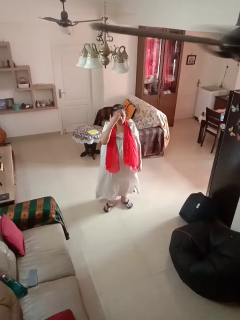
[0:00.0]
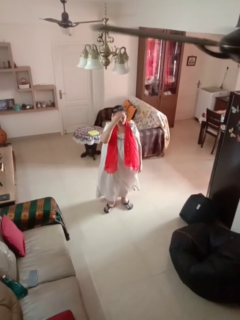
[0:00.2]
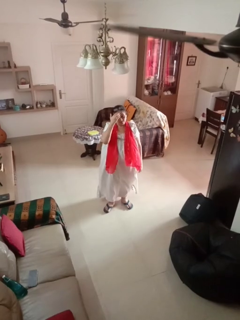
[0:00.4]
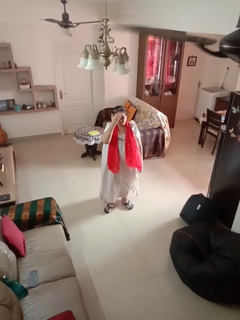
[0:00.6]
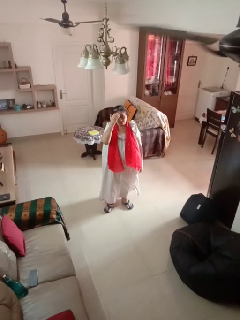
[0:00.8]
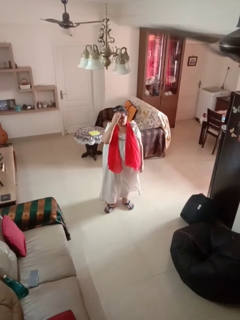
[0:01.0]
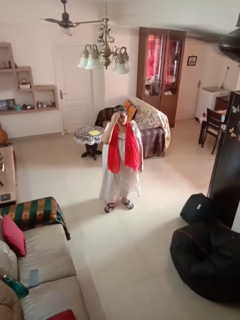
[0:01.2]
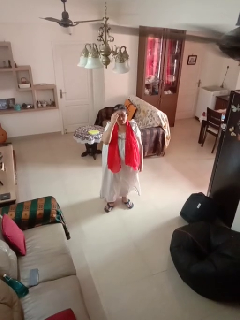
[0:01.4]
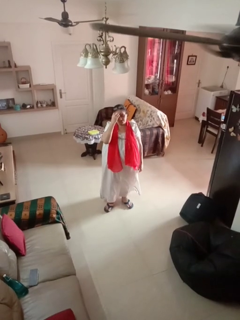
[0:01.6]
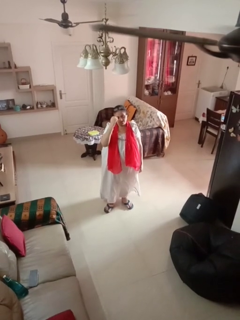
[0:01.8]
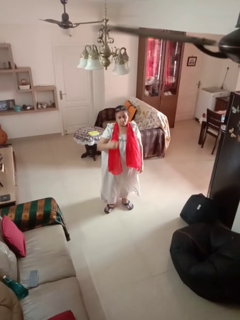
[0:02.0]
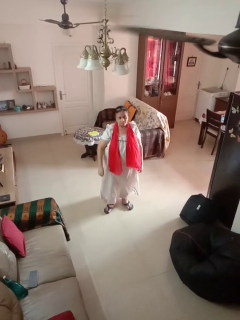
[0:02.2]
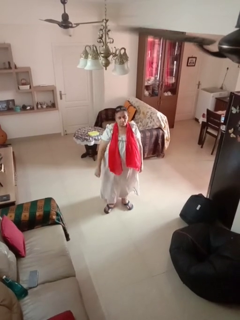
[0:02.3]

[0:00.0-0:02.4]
person scratches face

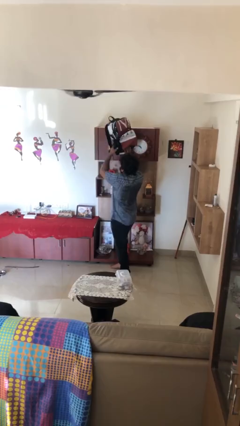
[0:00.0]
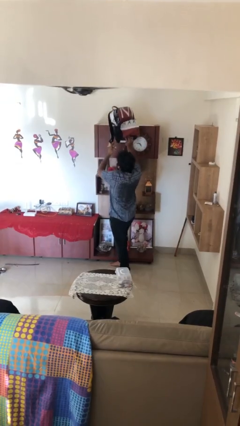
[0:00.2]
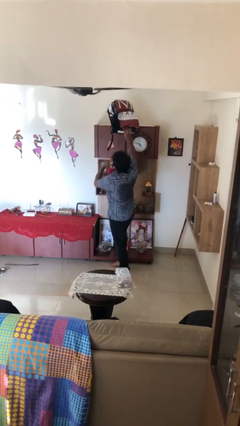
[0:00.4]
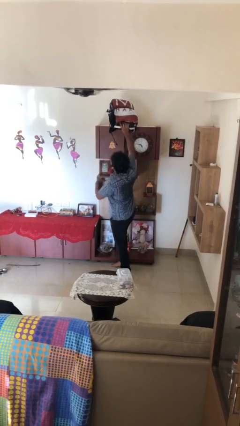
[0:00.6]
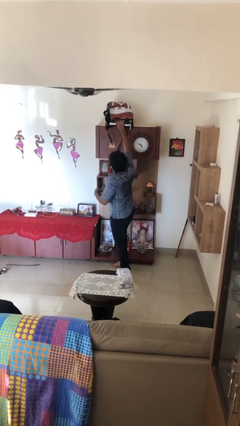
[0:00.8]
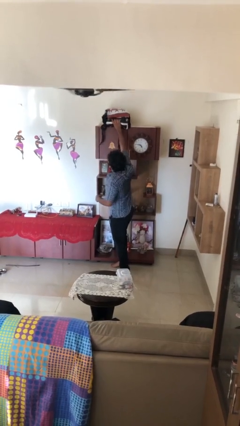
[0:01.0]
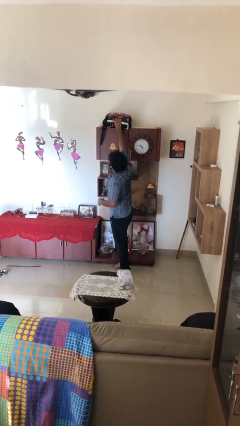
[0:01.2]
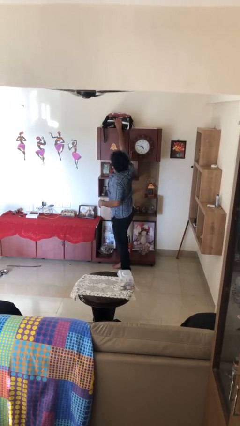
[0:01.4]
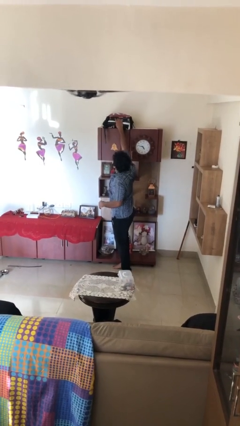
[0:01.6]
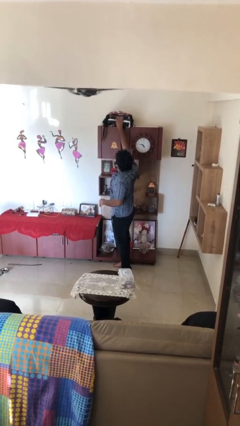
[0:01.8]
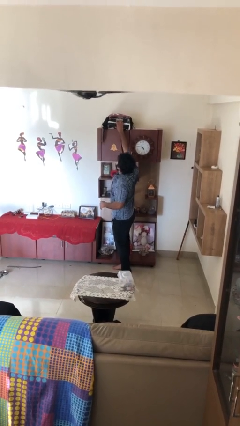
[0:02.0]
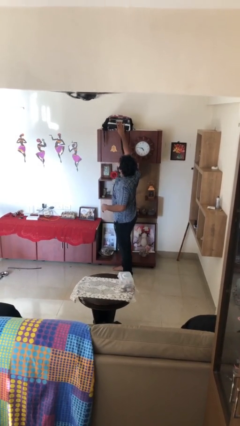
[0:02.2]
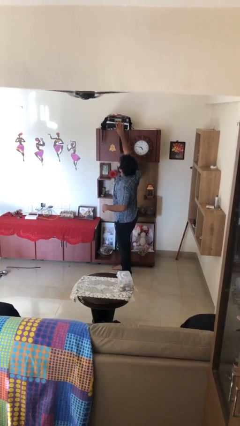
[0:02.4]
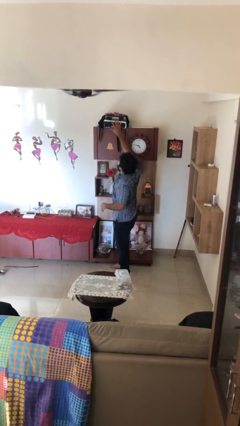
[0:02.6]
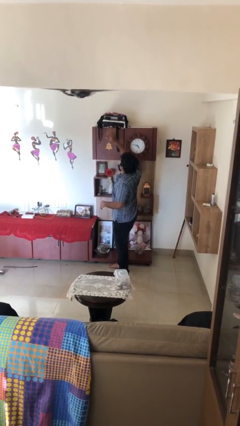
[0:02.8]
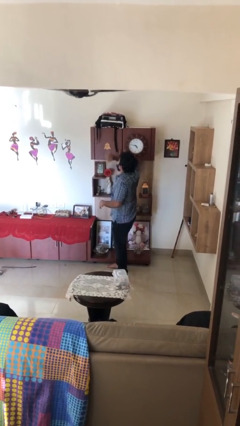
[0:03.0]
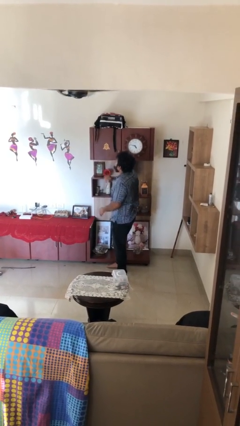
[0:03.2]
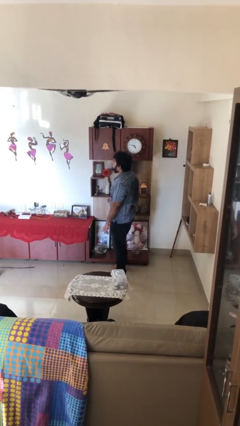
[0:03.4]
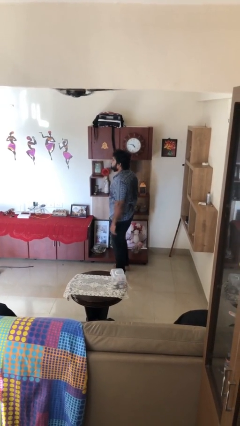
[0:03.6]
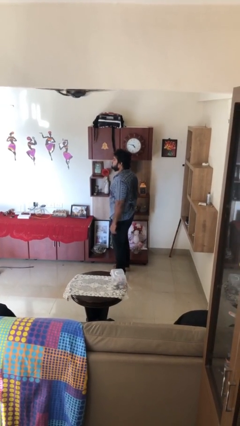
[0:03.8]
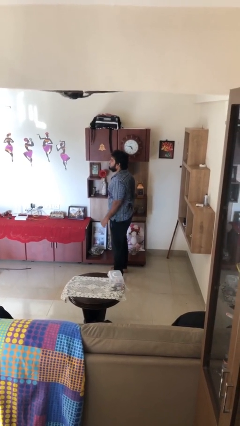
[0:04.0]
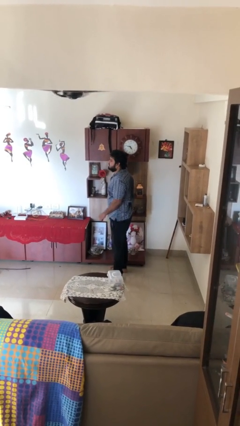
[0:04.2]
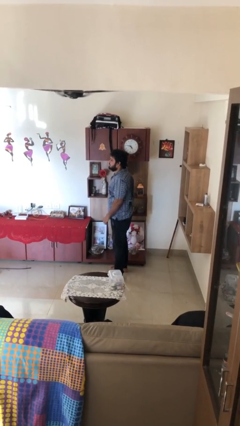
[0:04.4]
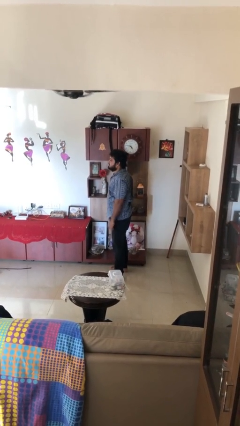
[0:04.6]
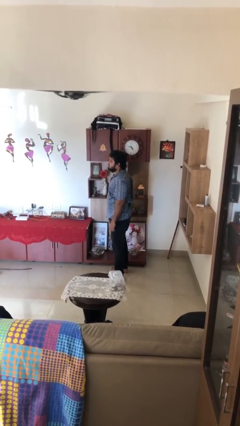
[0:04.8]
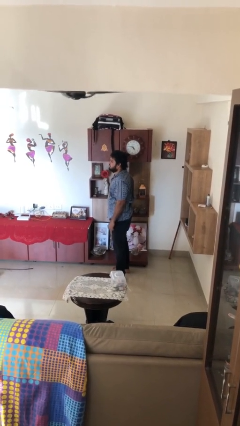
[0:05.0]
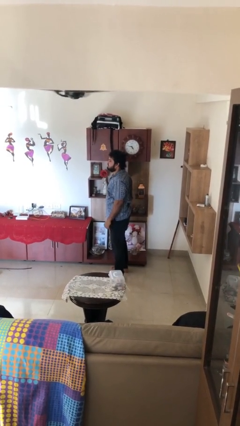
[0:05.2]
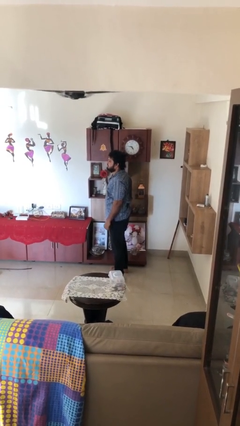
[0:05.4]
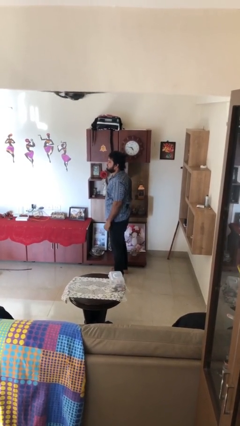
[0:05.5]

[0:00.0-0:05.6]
person puts down object on shelf

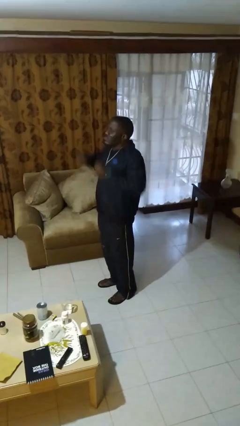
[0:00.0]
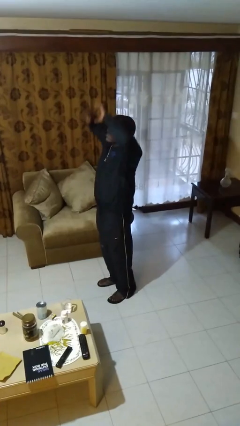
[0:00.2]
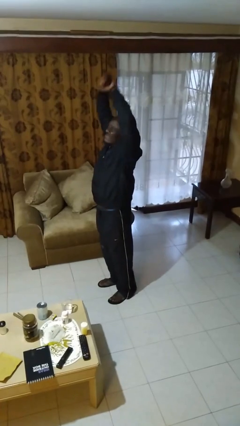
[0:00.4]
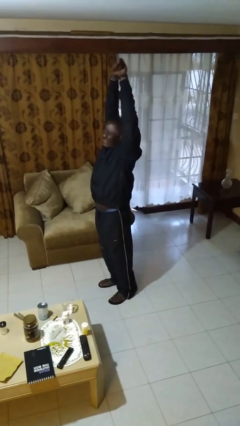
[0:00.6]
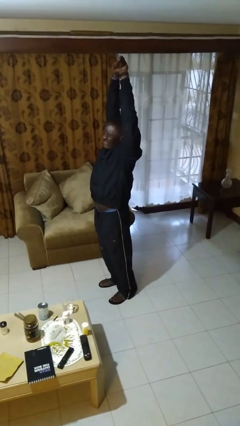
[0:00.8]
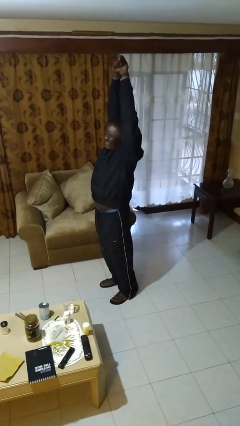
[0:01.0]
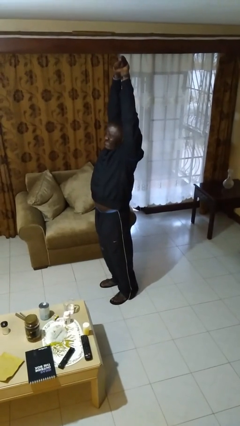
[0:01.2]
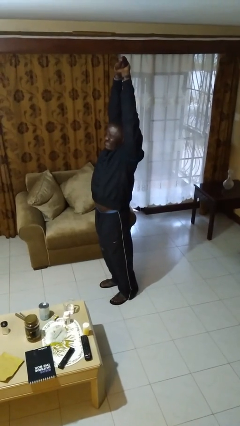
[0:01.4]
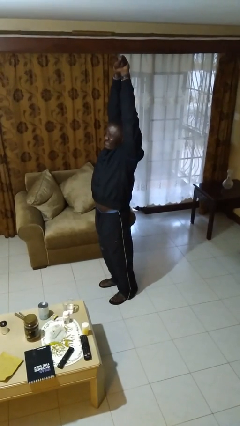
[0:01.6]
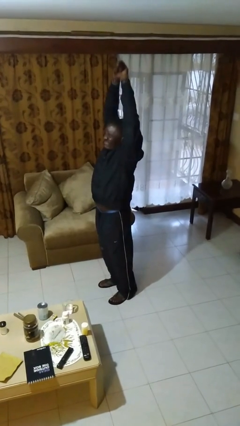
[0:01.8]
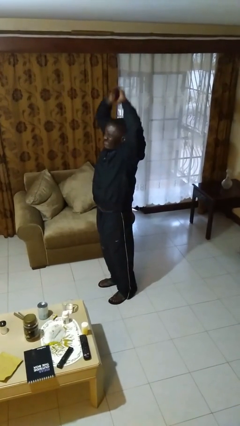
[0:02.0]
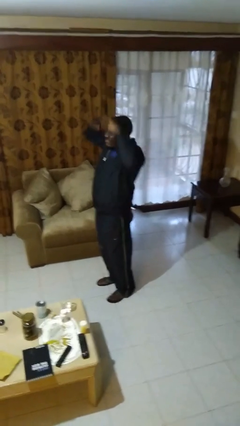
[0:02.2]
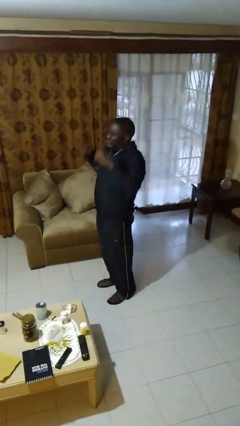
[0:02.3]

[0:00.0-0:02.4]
person stretches arms over head

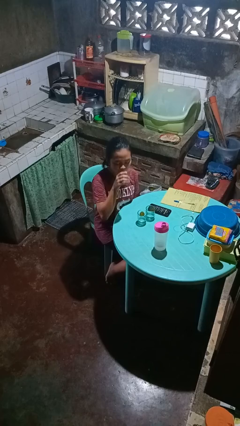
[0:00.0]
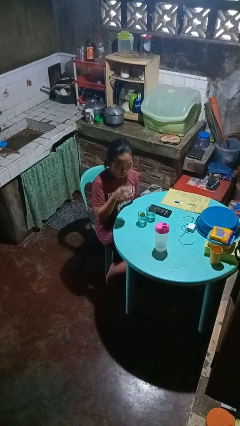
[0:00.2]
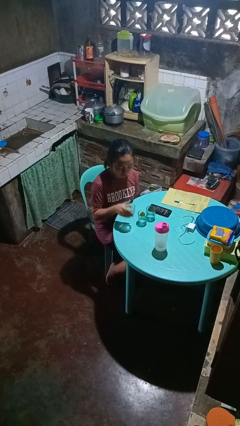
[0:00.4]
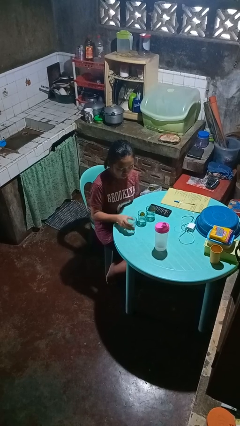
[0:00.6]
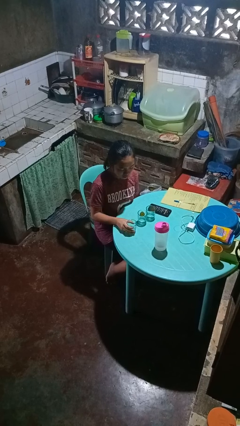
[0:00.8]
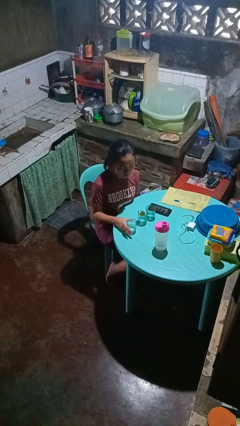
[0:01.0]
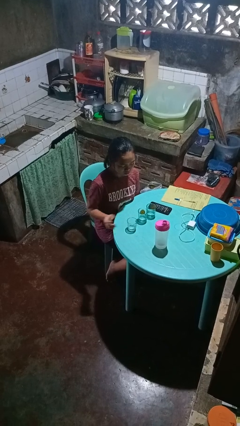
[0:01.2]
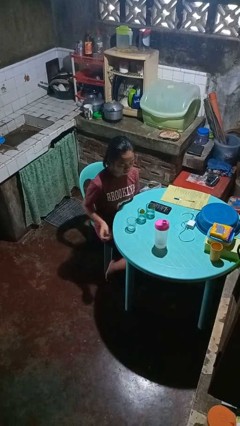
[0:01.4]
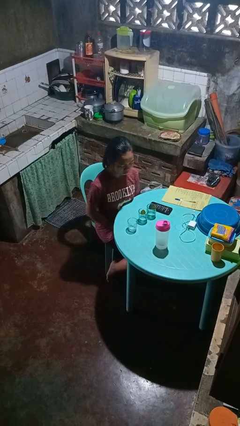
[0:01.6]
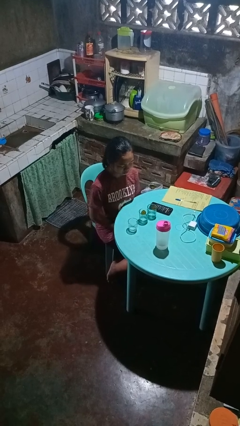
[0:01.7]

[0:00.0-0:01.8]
person puts down object on table

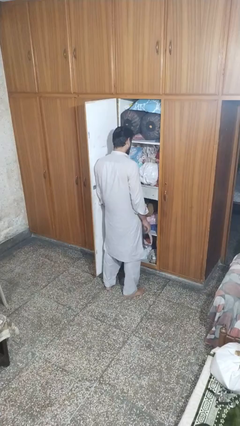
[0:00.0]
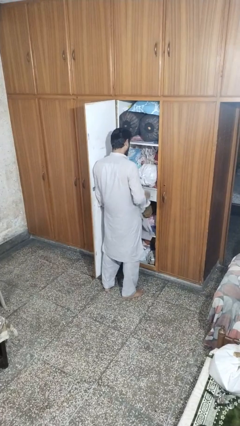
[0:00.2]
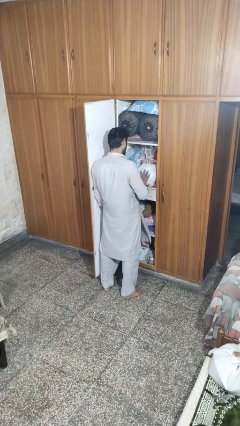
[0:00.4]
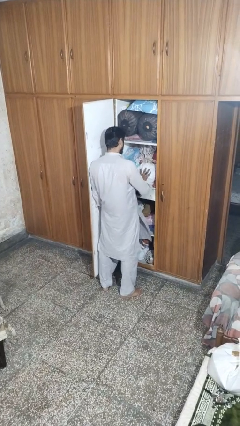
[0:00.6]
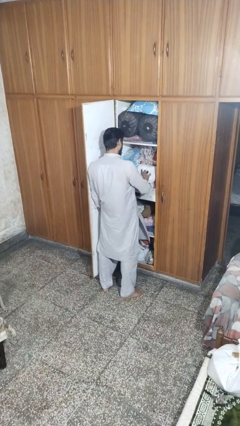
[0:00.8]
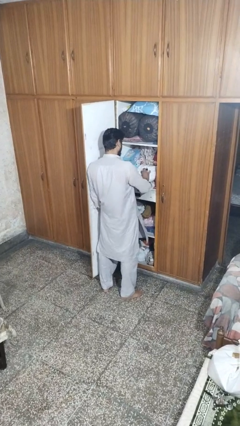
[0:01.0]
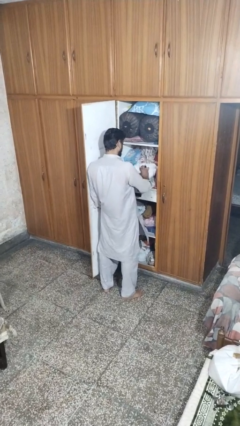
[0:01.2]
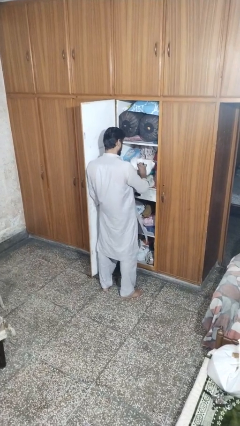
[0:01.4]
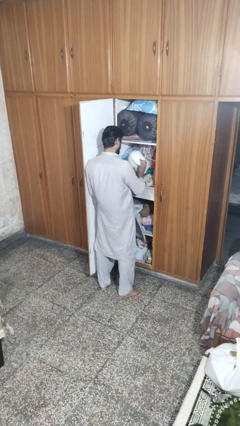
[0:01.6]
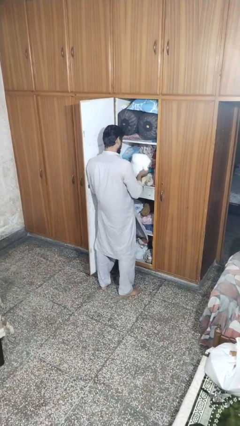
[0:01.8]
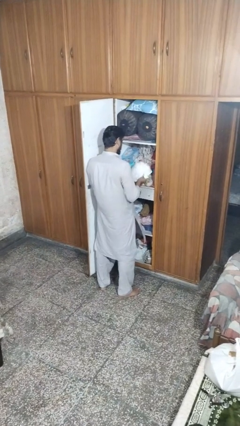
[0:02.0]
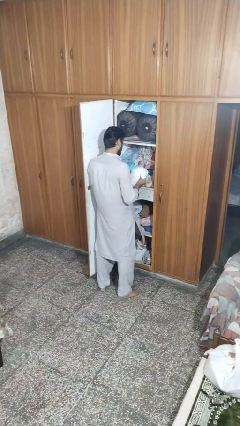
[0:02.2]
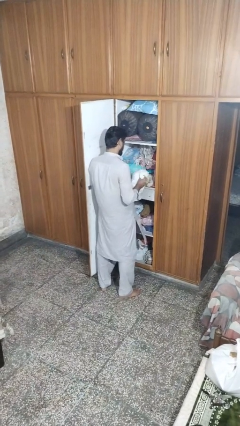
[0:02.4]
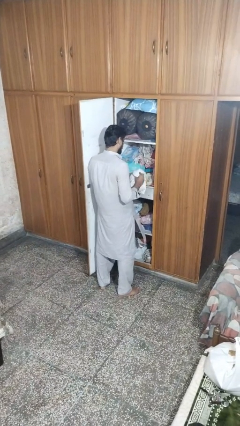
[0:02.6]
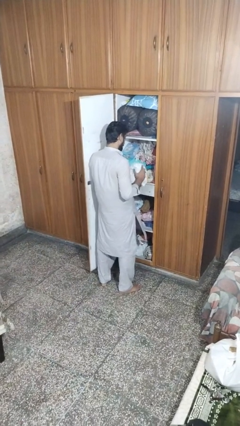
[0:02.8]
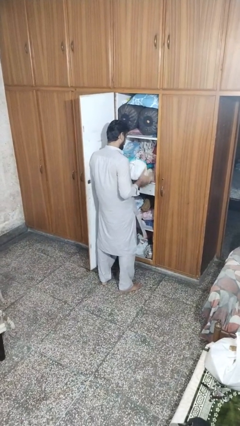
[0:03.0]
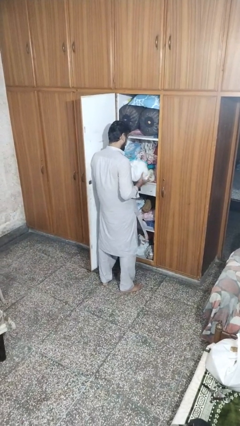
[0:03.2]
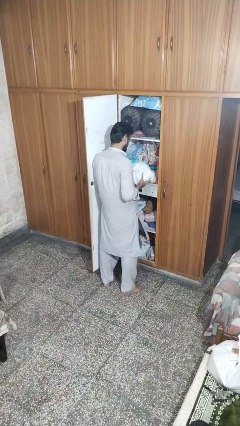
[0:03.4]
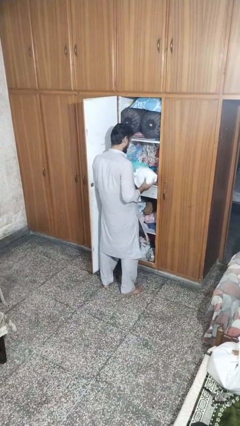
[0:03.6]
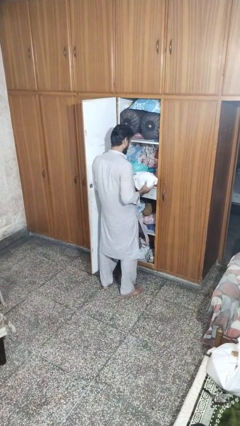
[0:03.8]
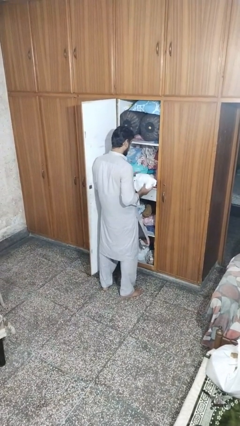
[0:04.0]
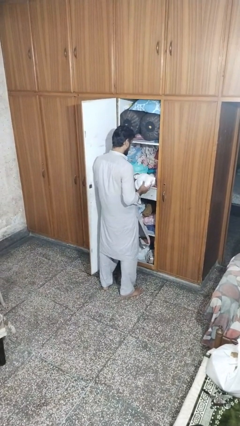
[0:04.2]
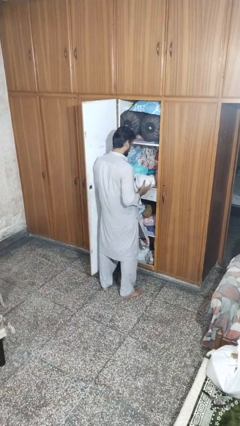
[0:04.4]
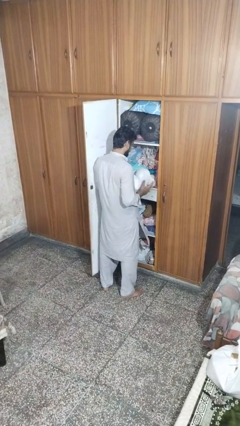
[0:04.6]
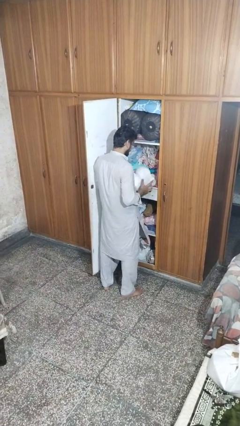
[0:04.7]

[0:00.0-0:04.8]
person picks up object from cabinet

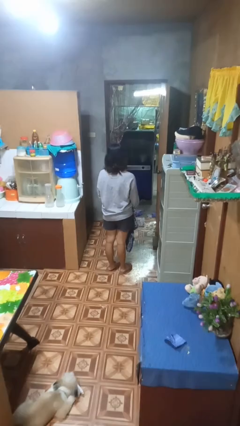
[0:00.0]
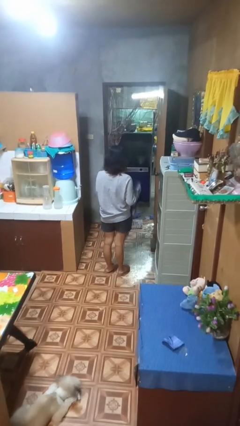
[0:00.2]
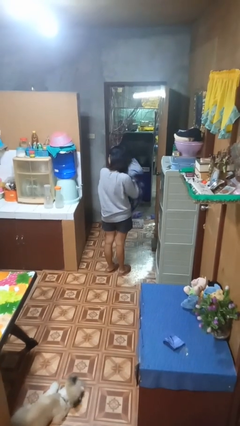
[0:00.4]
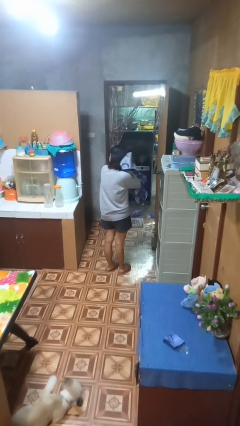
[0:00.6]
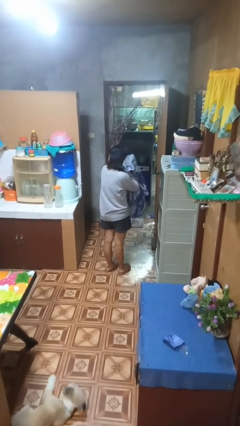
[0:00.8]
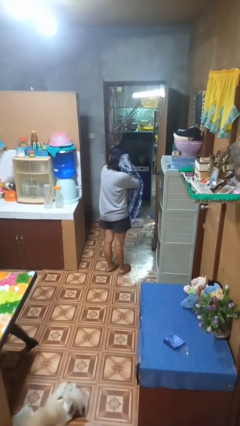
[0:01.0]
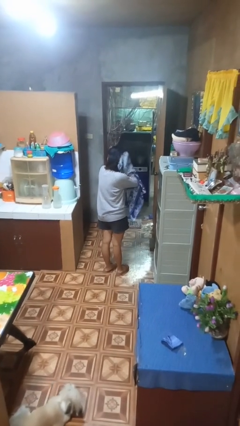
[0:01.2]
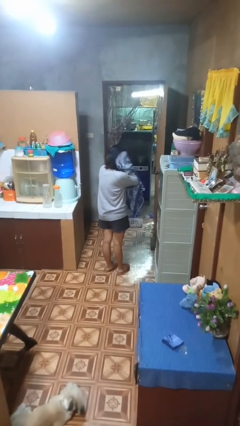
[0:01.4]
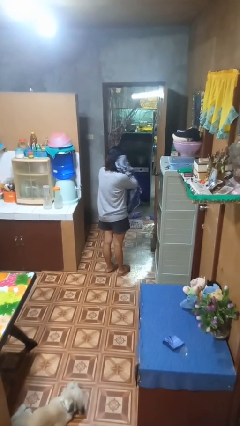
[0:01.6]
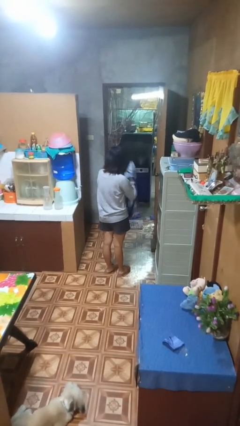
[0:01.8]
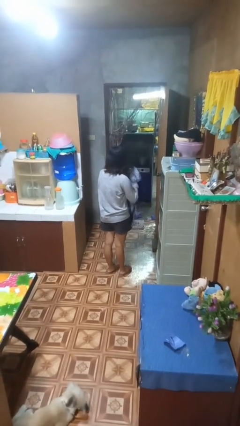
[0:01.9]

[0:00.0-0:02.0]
person dries hair with towel
